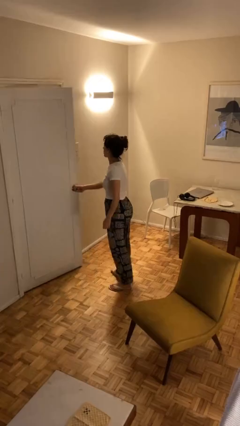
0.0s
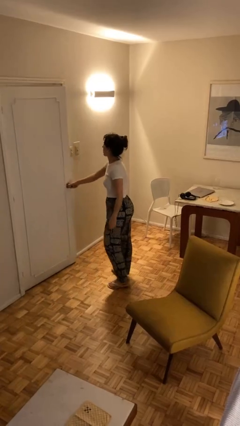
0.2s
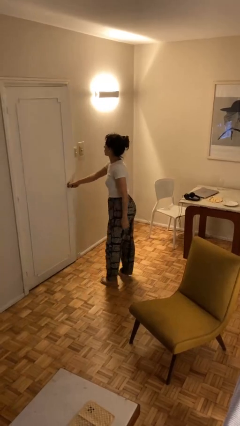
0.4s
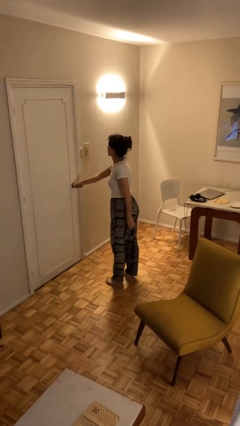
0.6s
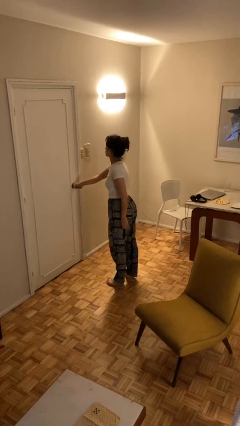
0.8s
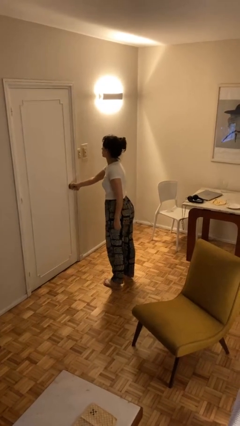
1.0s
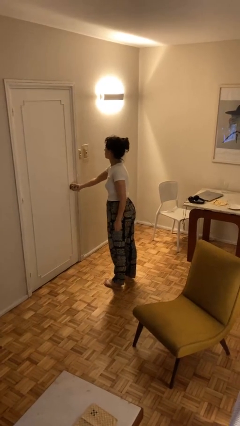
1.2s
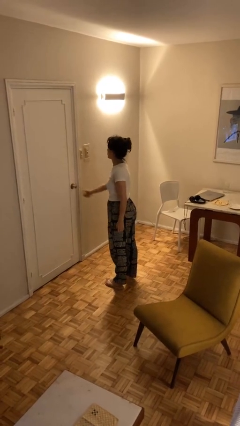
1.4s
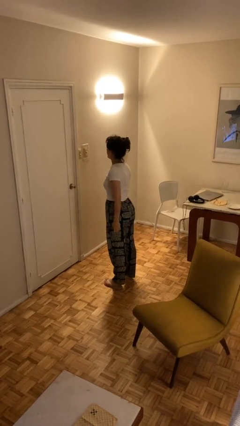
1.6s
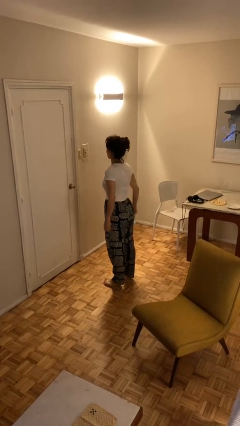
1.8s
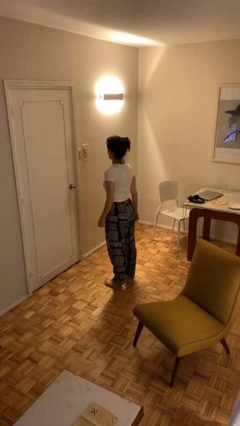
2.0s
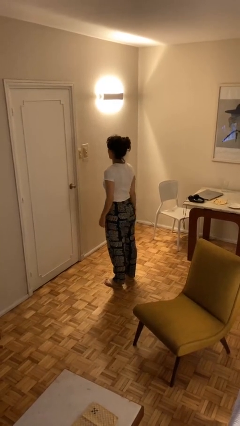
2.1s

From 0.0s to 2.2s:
person closes facility door

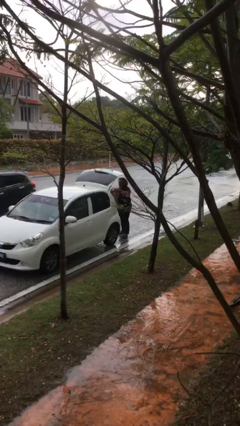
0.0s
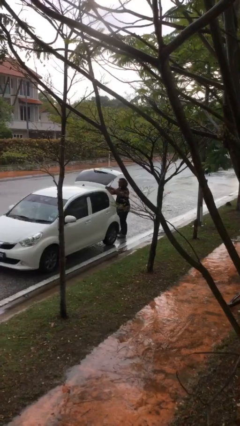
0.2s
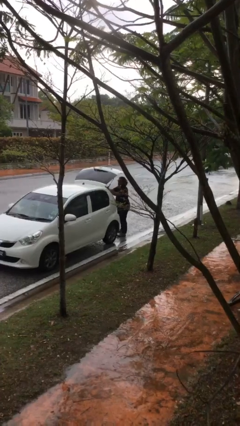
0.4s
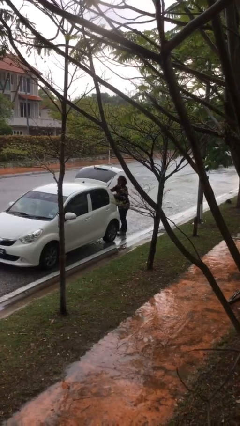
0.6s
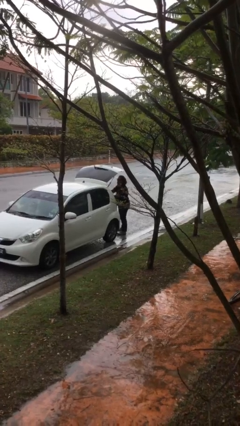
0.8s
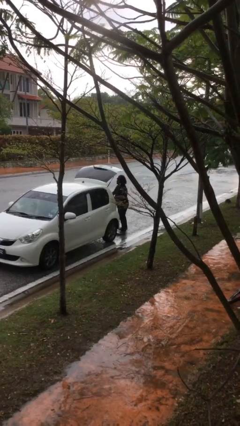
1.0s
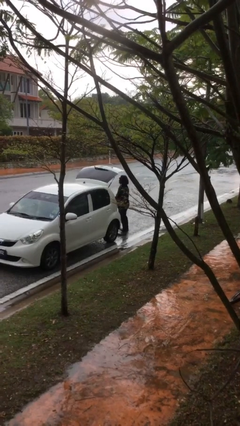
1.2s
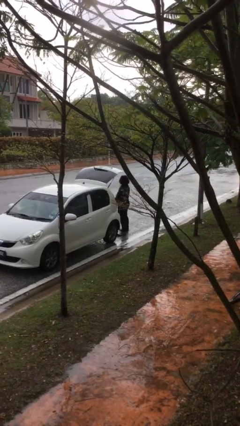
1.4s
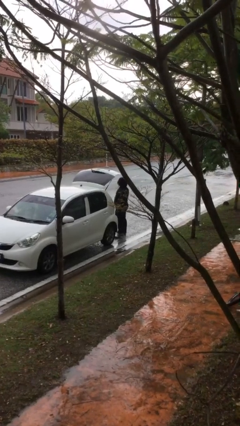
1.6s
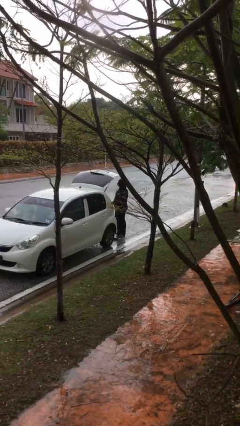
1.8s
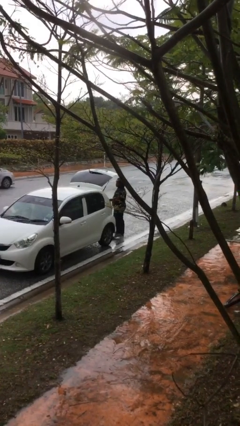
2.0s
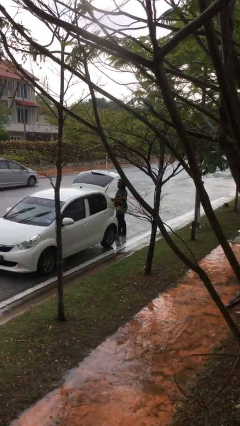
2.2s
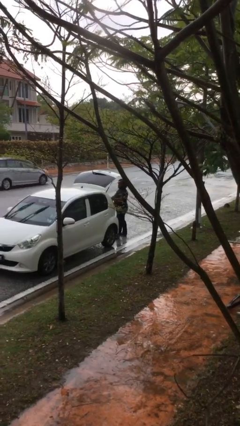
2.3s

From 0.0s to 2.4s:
person loads car

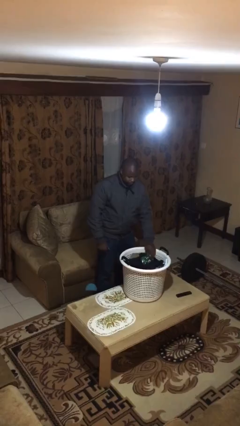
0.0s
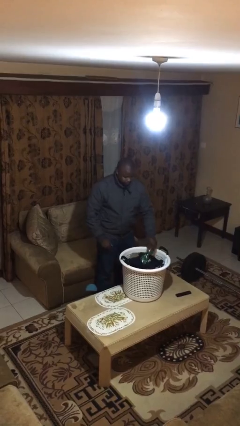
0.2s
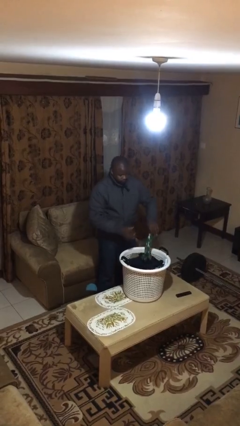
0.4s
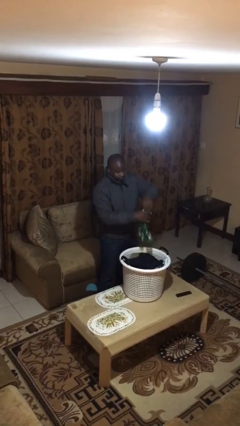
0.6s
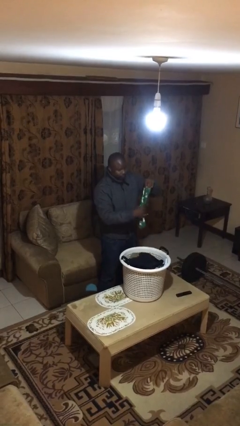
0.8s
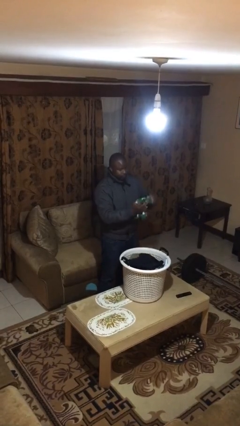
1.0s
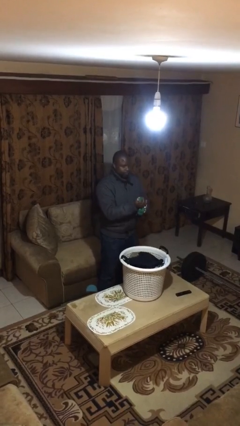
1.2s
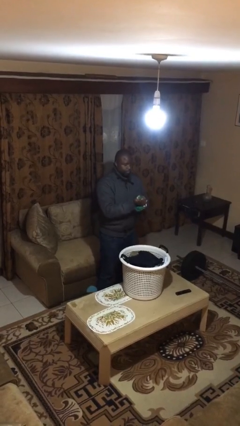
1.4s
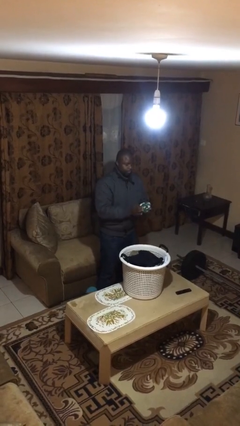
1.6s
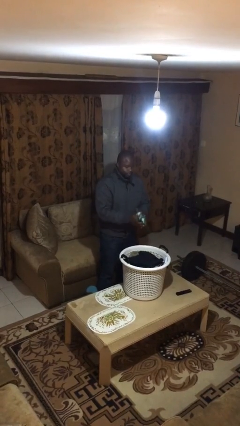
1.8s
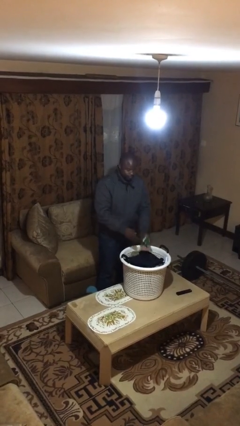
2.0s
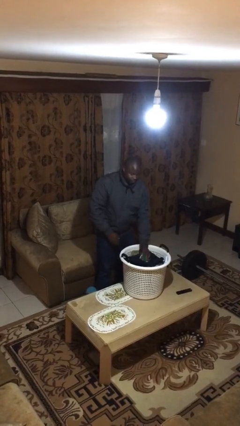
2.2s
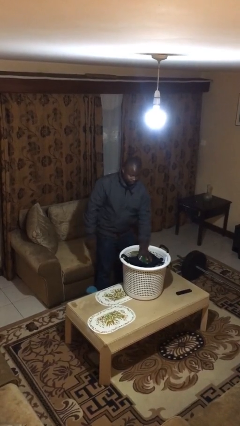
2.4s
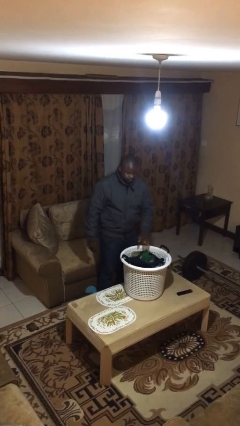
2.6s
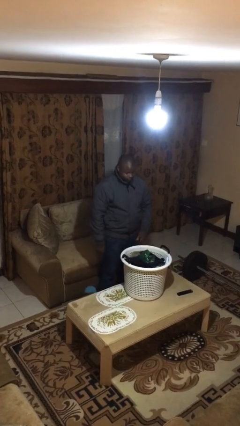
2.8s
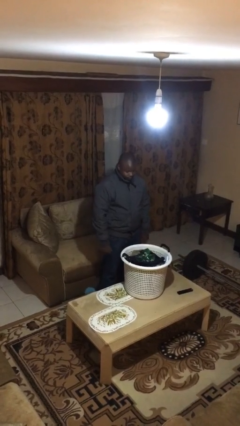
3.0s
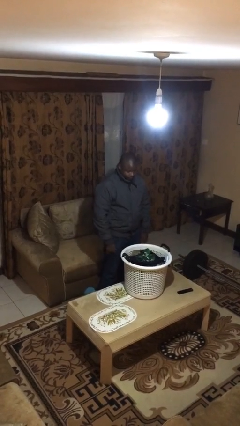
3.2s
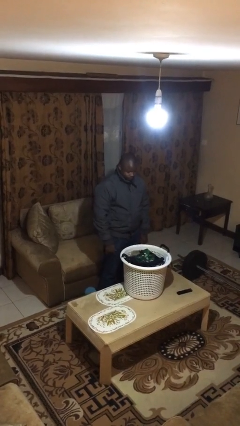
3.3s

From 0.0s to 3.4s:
person folds socks

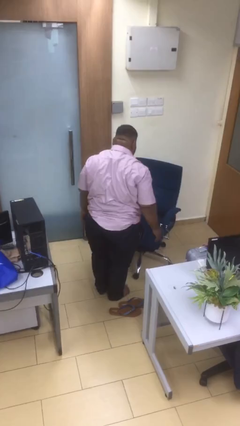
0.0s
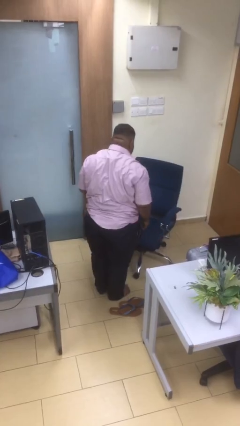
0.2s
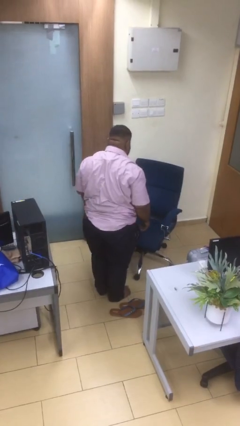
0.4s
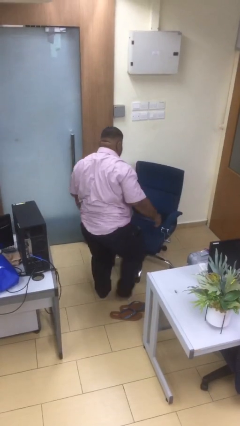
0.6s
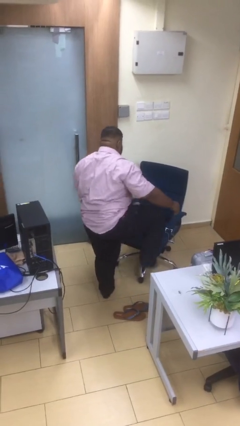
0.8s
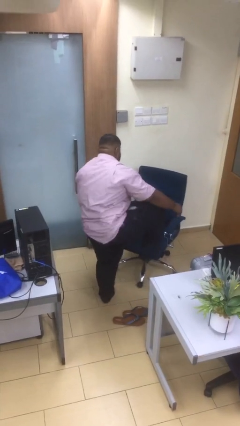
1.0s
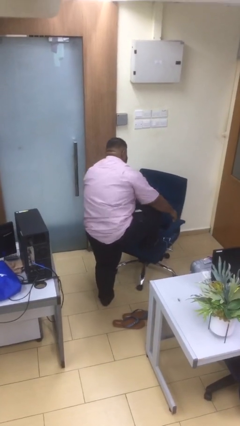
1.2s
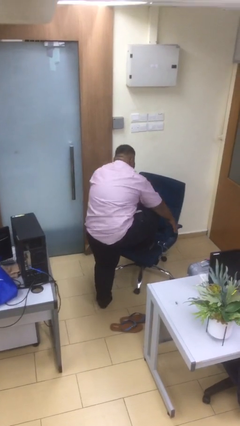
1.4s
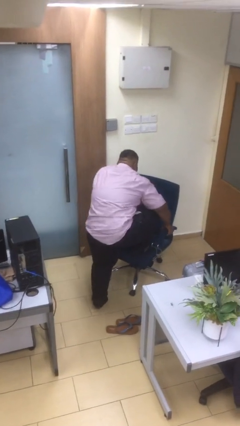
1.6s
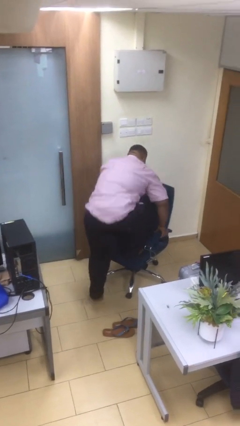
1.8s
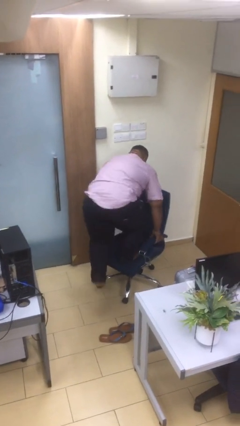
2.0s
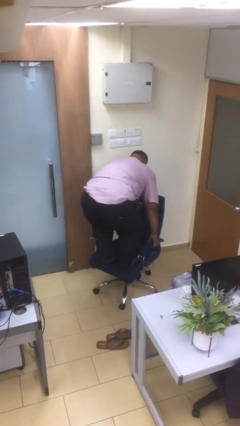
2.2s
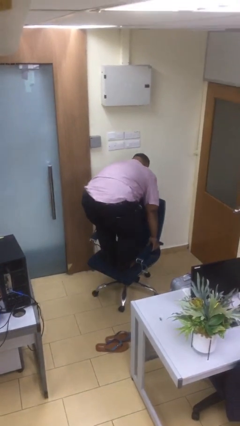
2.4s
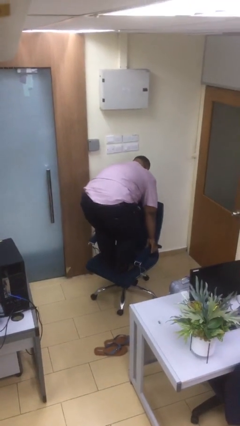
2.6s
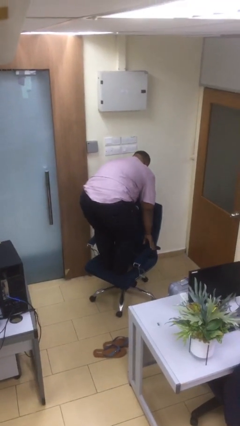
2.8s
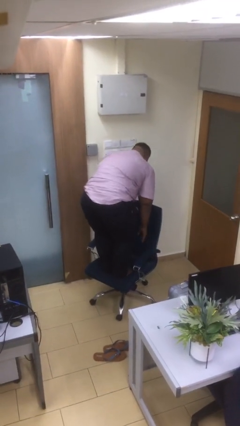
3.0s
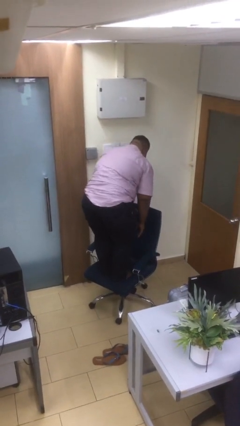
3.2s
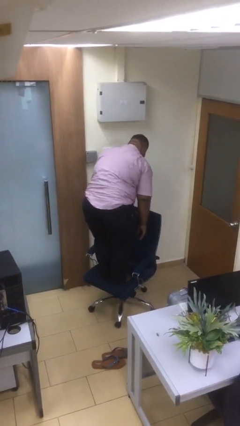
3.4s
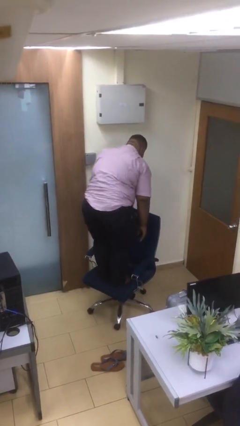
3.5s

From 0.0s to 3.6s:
person climbs on chair

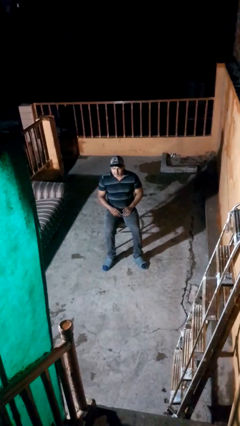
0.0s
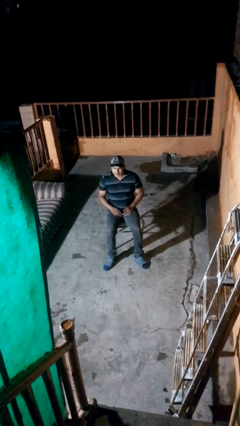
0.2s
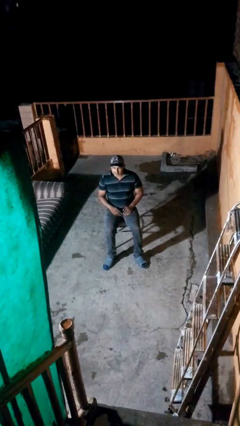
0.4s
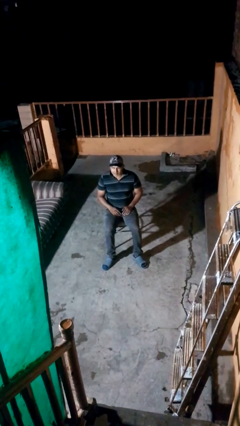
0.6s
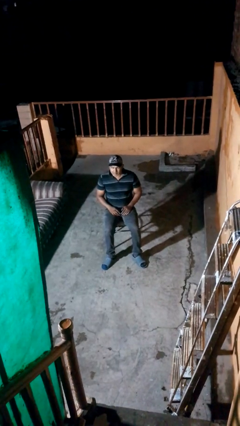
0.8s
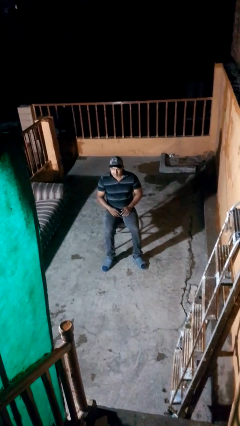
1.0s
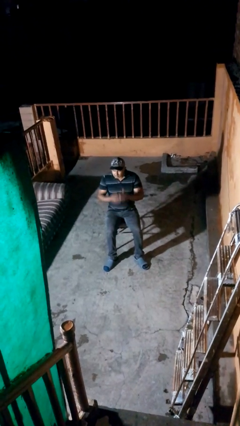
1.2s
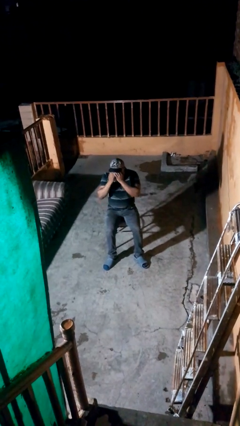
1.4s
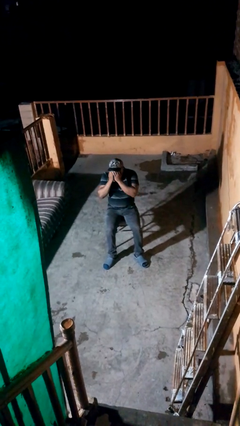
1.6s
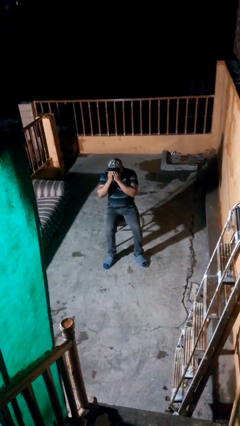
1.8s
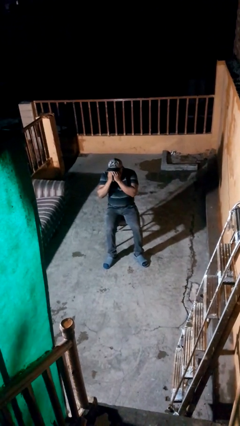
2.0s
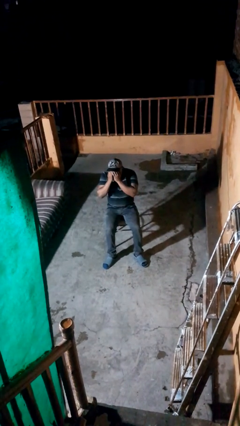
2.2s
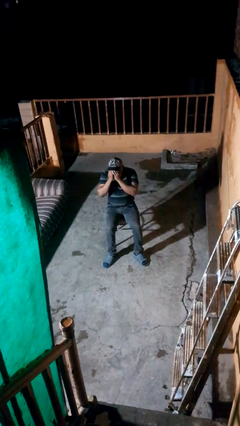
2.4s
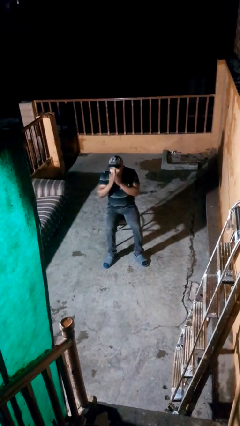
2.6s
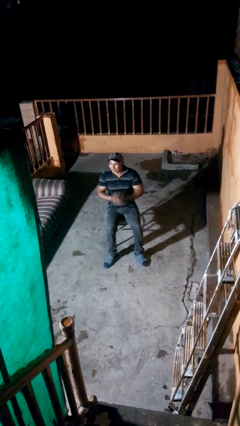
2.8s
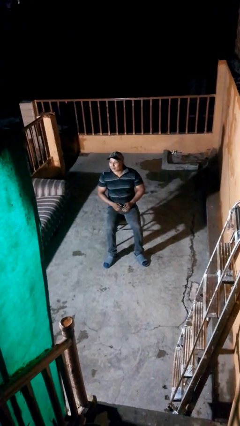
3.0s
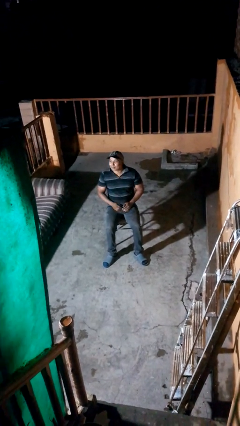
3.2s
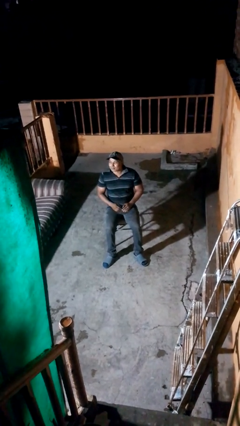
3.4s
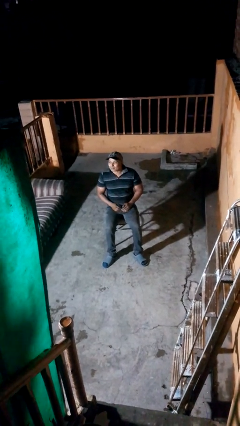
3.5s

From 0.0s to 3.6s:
person covers face with hands

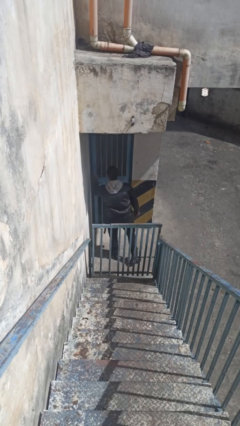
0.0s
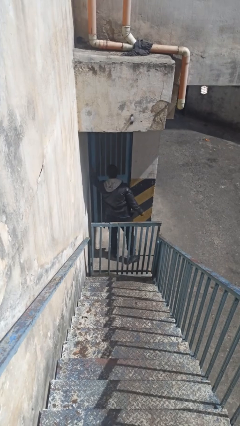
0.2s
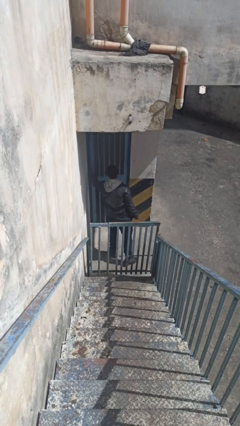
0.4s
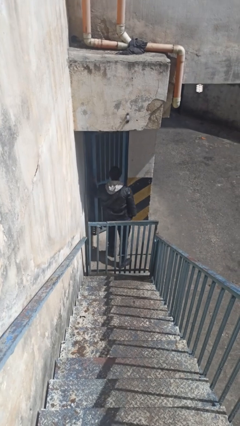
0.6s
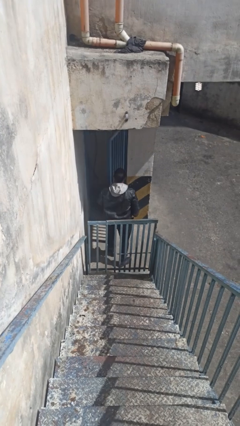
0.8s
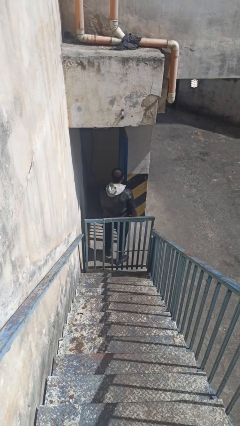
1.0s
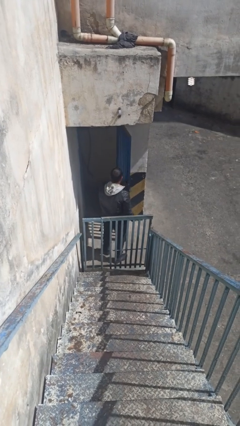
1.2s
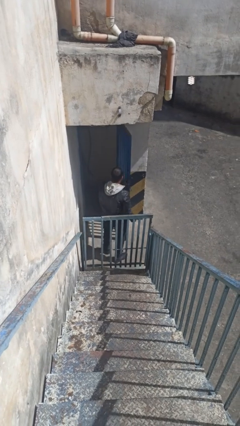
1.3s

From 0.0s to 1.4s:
person opens facility door

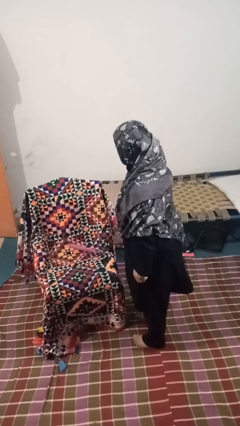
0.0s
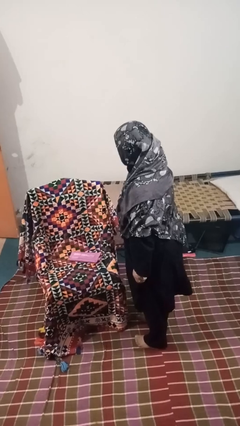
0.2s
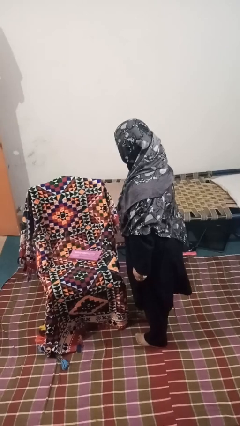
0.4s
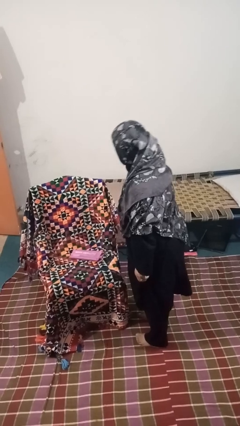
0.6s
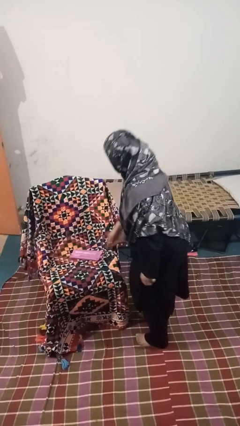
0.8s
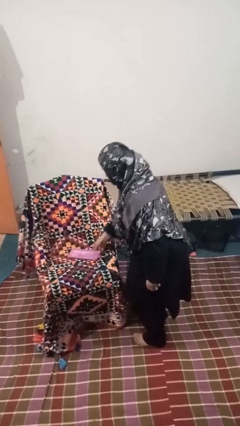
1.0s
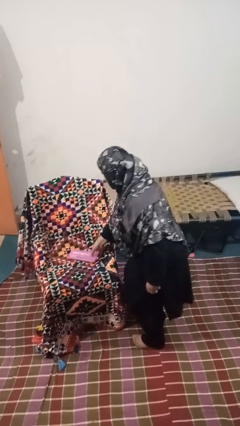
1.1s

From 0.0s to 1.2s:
person puts down object on couch
